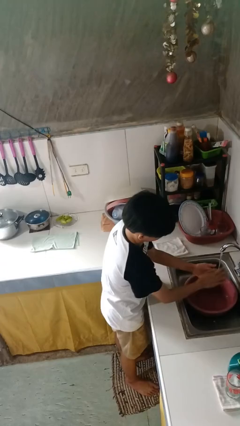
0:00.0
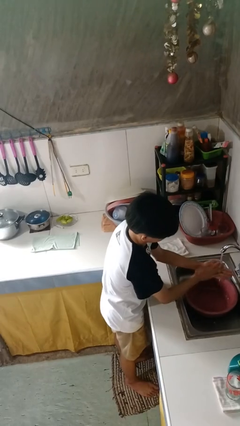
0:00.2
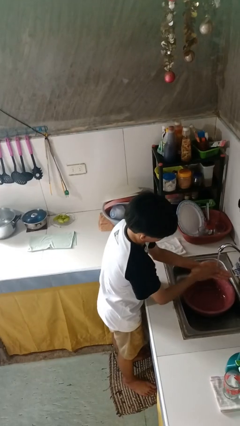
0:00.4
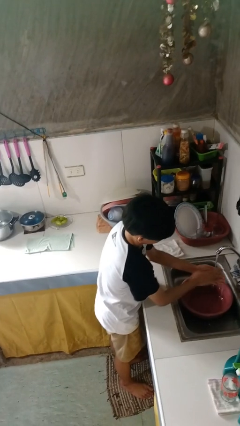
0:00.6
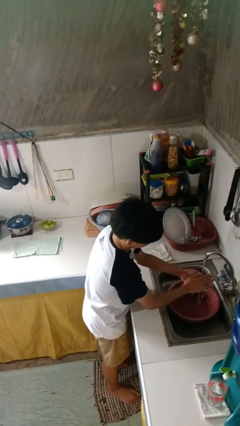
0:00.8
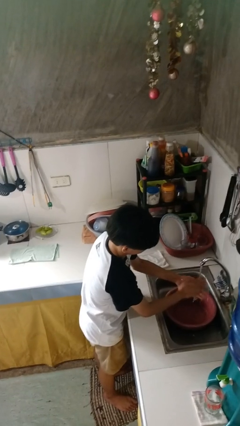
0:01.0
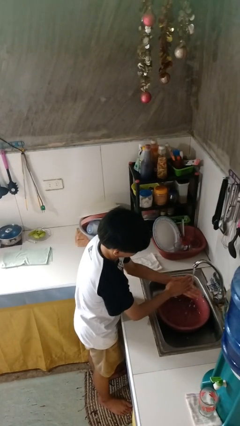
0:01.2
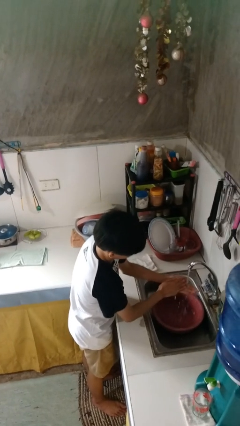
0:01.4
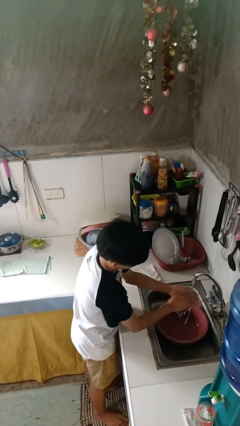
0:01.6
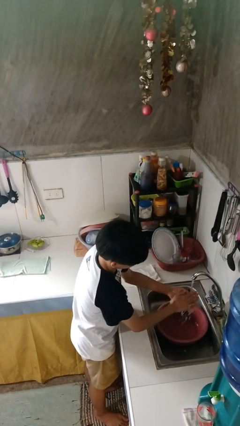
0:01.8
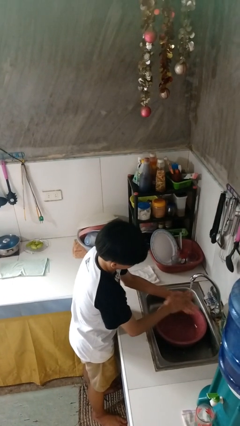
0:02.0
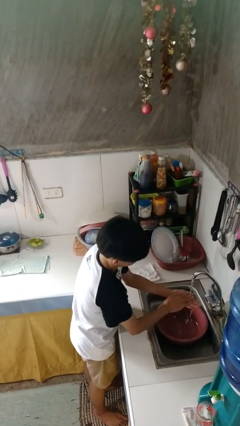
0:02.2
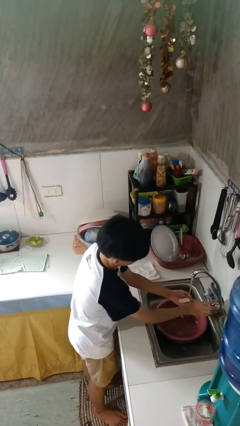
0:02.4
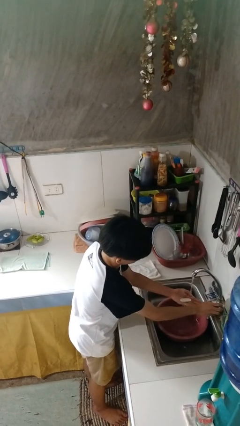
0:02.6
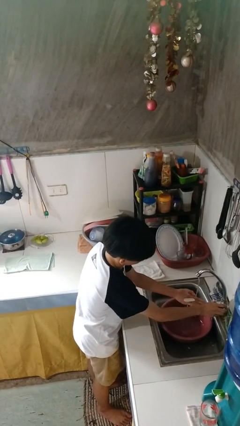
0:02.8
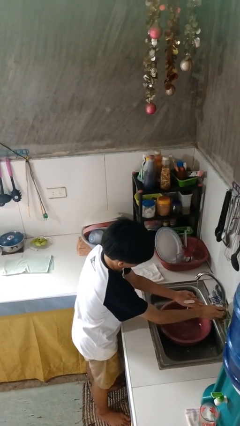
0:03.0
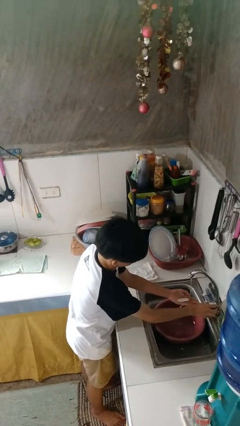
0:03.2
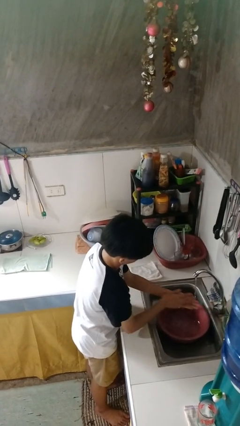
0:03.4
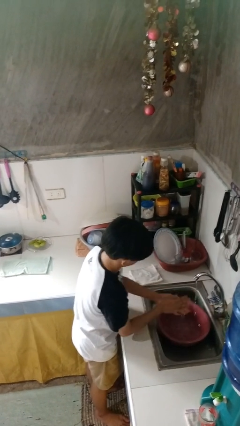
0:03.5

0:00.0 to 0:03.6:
person washes hands

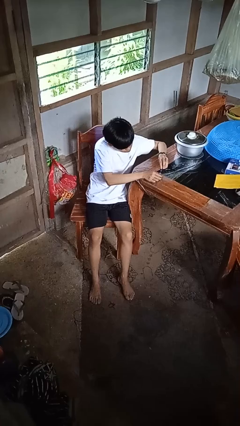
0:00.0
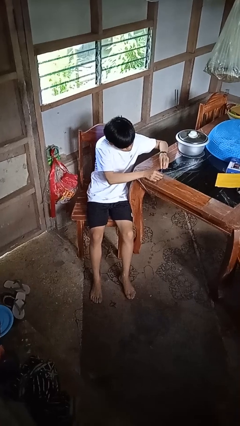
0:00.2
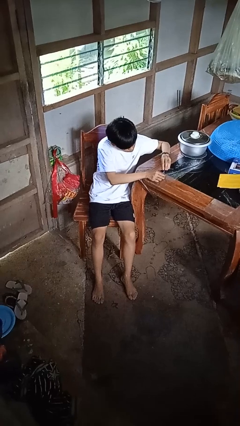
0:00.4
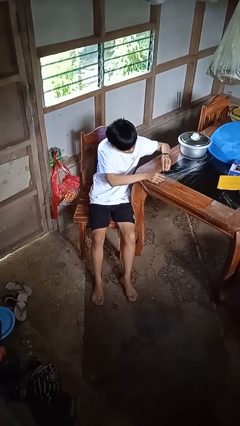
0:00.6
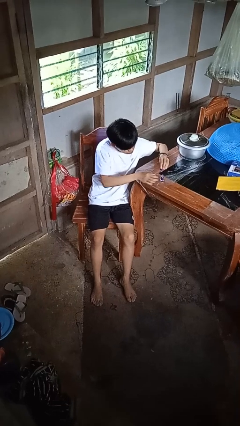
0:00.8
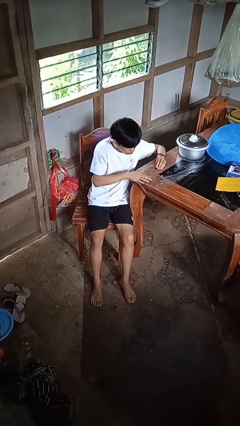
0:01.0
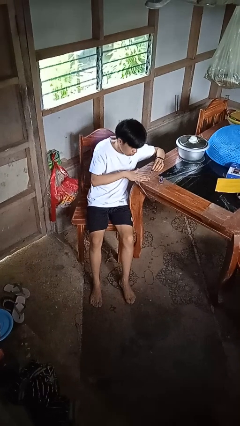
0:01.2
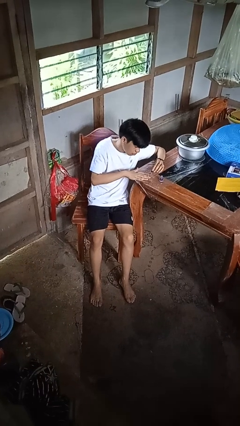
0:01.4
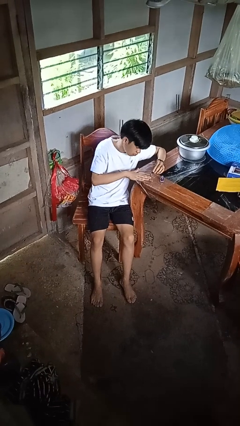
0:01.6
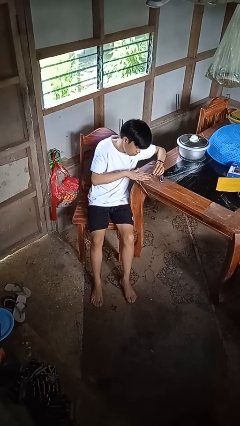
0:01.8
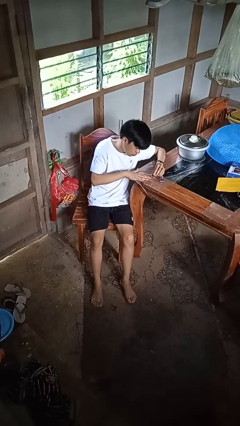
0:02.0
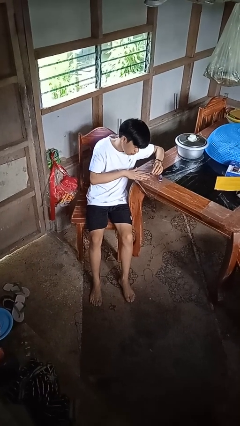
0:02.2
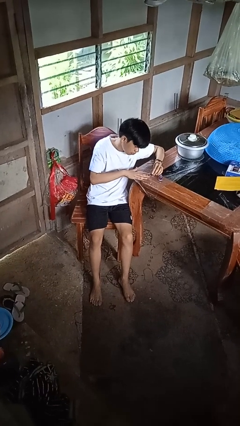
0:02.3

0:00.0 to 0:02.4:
person paints fingernails

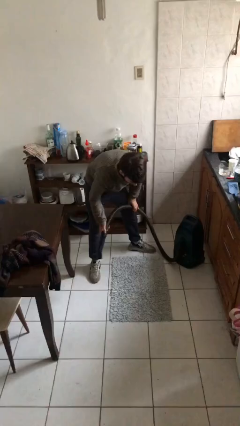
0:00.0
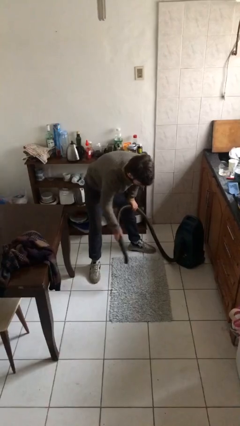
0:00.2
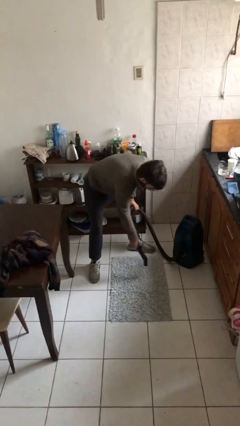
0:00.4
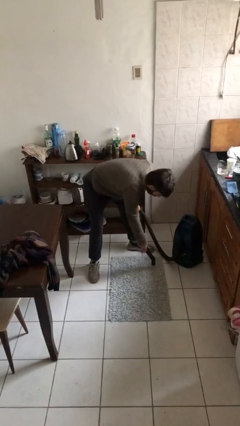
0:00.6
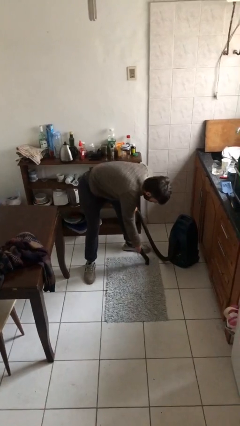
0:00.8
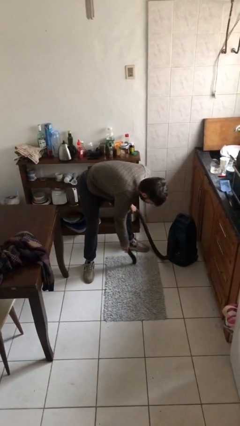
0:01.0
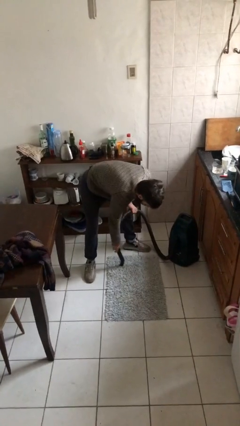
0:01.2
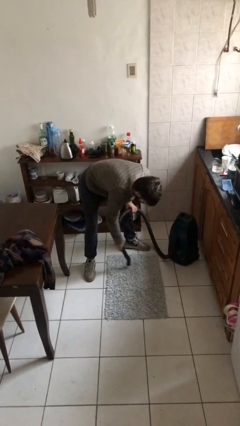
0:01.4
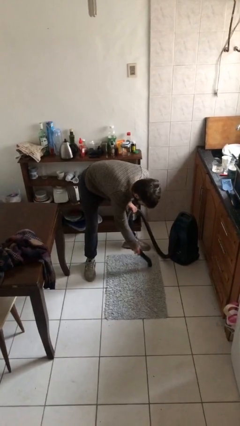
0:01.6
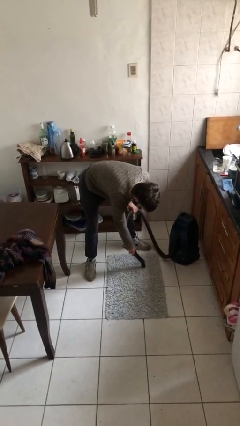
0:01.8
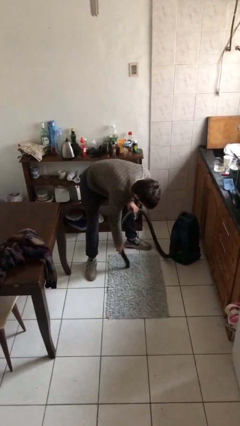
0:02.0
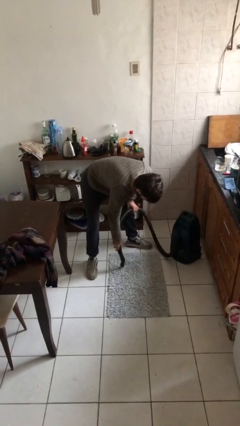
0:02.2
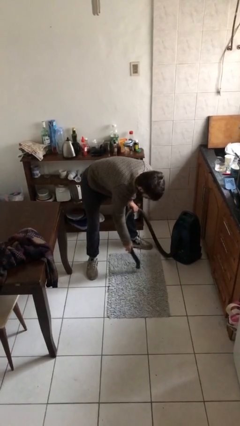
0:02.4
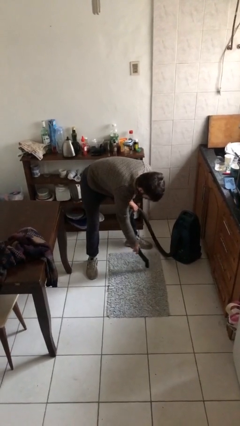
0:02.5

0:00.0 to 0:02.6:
person vacuums carpet

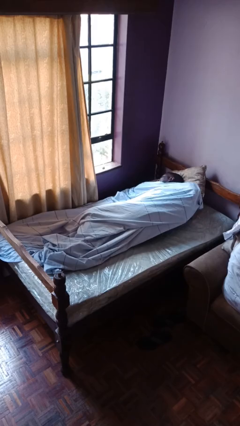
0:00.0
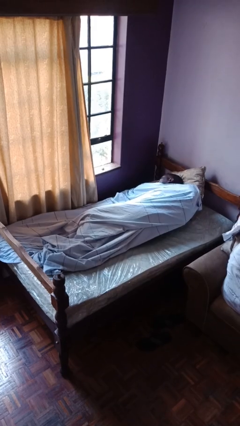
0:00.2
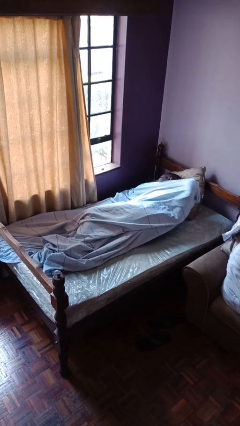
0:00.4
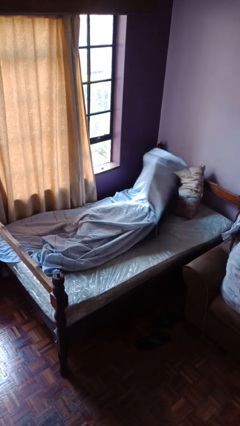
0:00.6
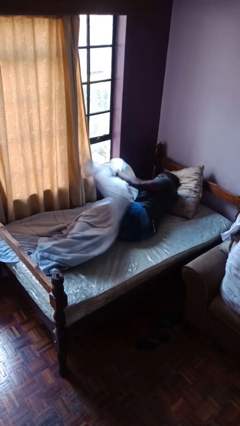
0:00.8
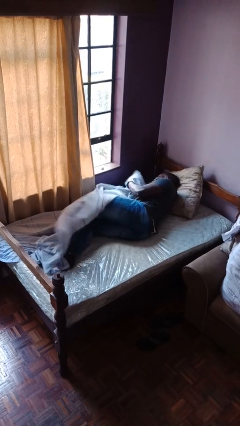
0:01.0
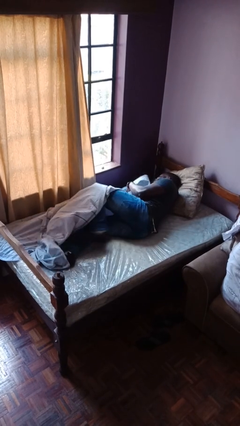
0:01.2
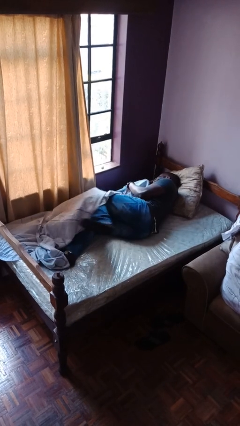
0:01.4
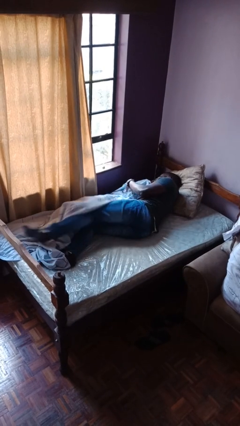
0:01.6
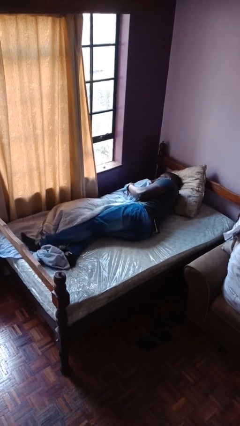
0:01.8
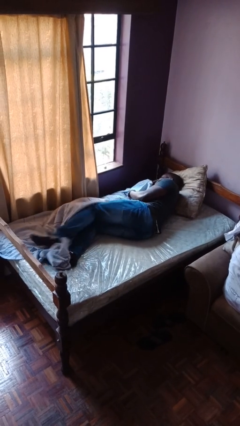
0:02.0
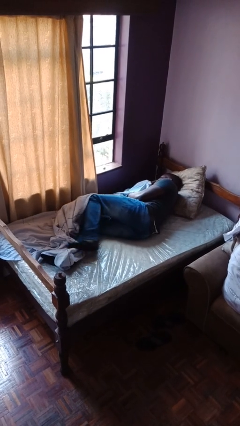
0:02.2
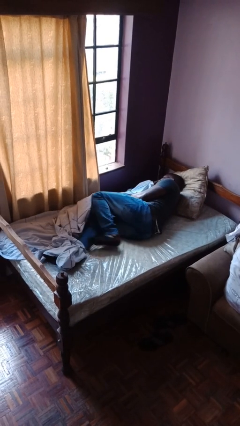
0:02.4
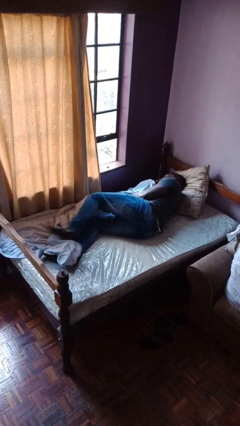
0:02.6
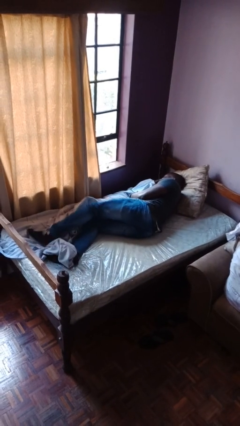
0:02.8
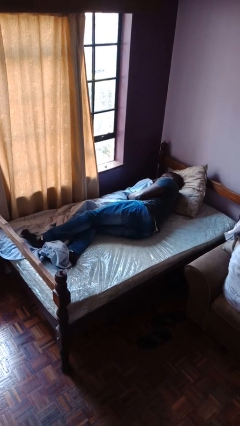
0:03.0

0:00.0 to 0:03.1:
person uncovers with bedsheets

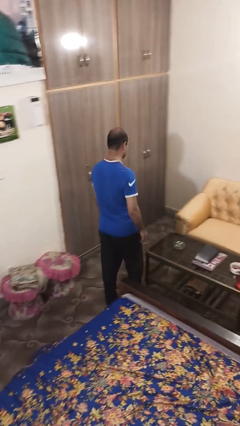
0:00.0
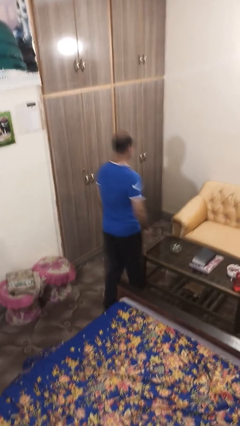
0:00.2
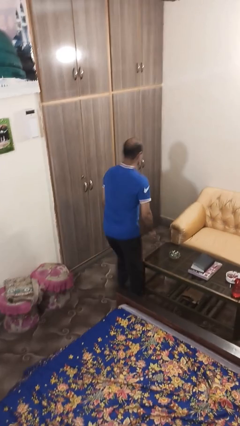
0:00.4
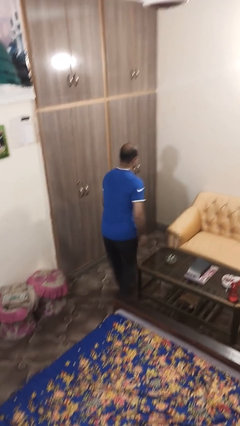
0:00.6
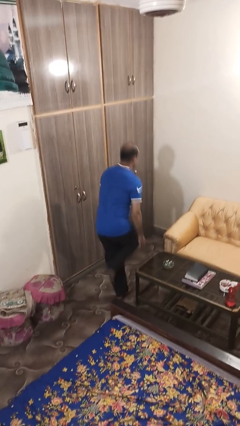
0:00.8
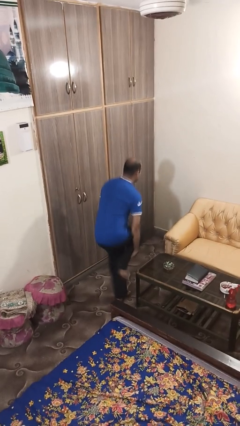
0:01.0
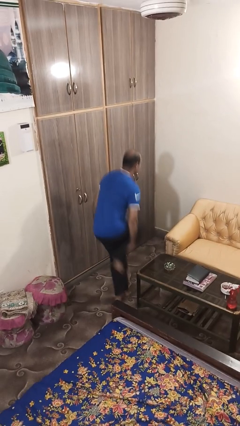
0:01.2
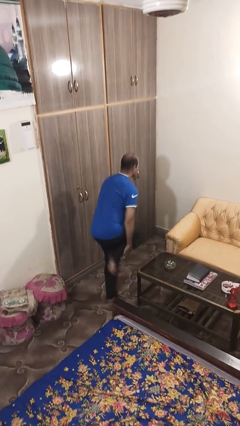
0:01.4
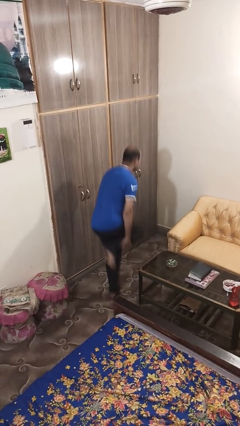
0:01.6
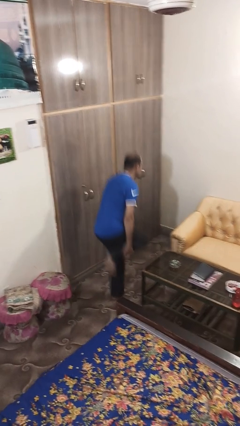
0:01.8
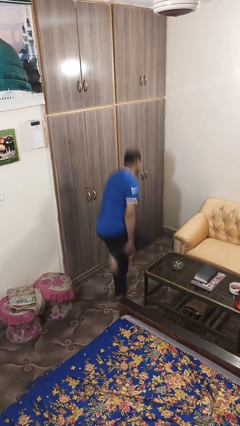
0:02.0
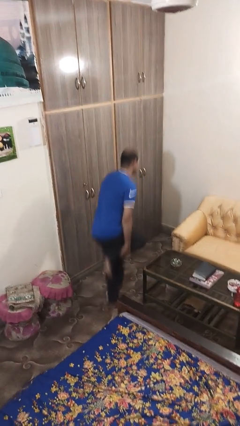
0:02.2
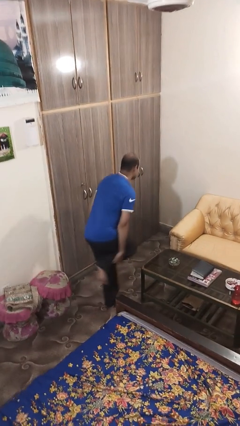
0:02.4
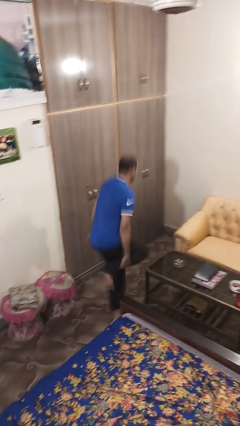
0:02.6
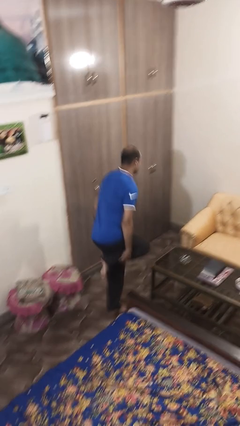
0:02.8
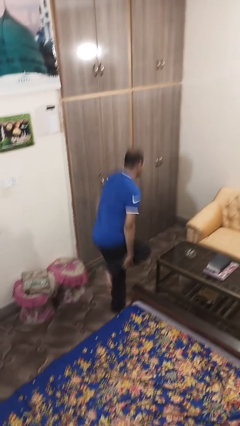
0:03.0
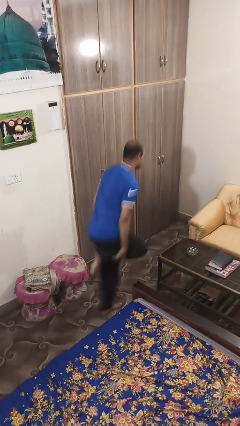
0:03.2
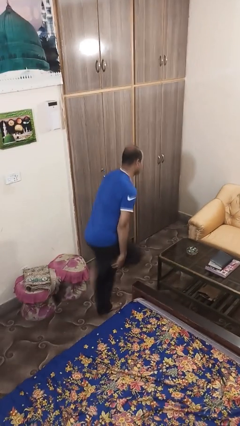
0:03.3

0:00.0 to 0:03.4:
person bumps into table

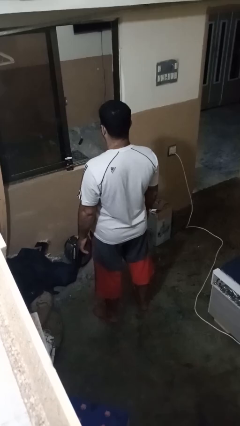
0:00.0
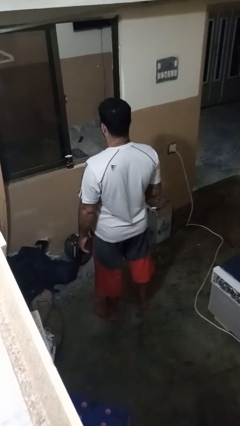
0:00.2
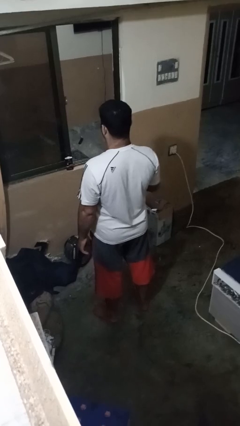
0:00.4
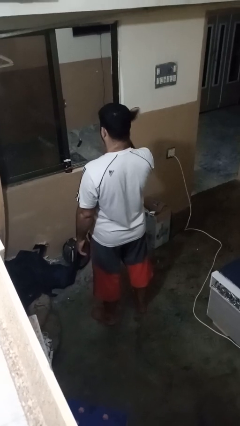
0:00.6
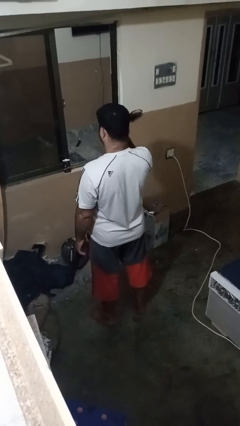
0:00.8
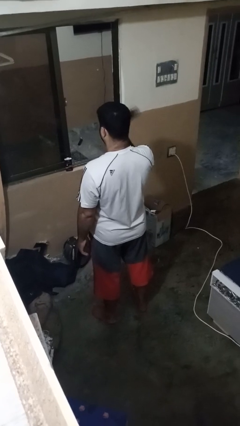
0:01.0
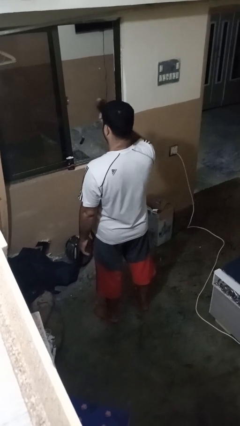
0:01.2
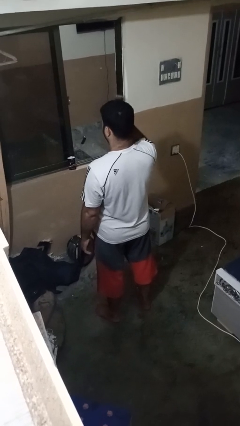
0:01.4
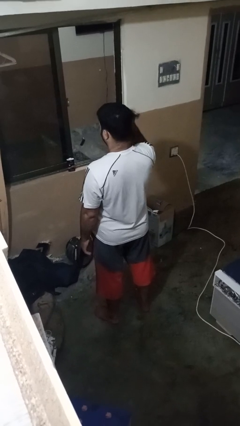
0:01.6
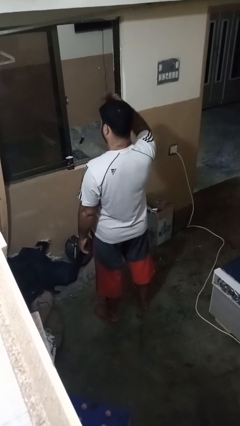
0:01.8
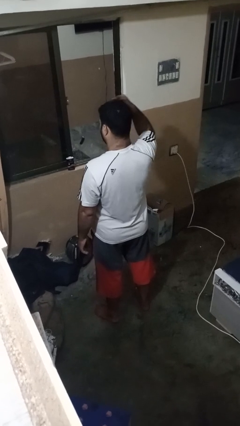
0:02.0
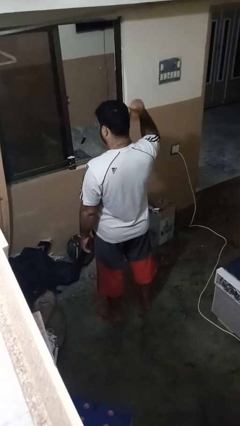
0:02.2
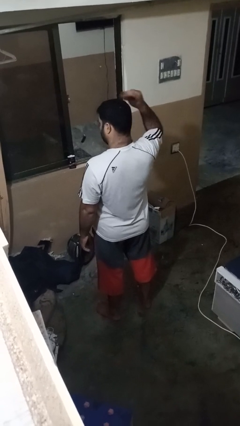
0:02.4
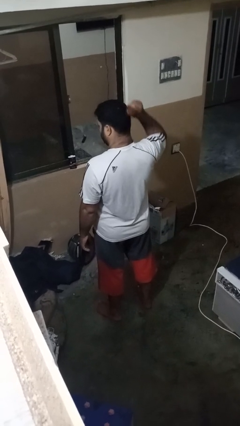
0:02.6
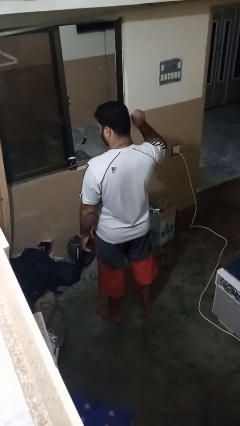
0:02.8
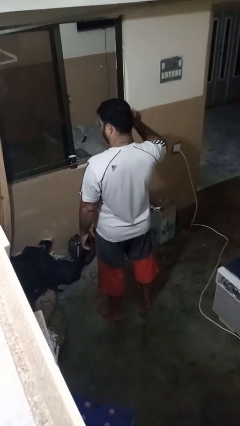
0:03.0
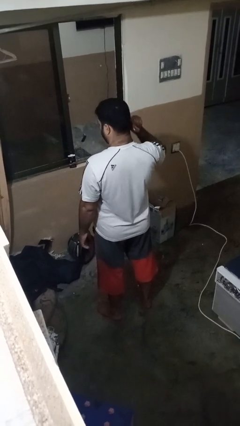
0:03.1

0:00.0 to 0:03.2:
person brushes hair
